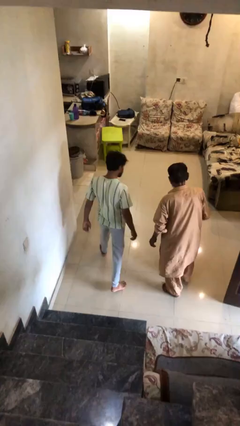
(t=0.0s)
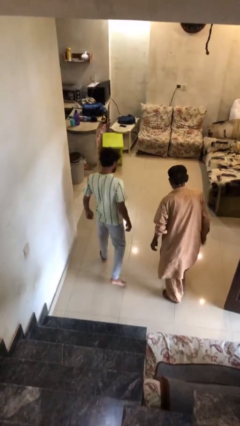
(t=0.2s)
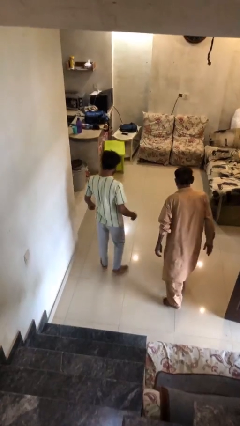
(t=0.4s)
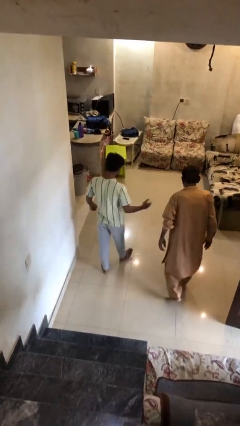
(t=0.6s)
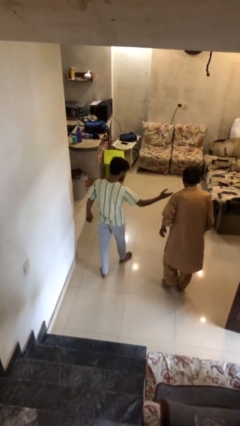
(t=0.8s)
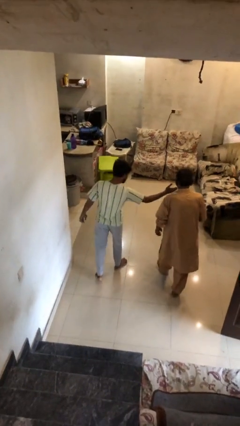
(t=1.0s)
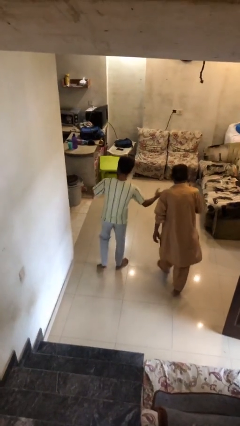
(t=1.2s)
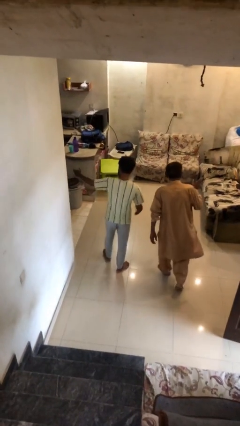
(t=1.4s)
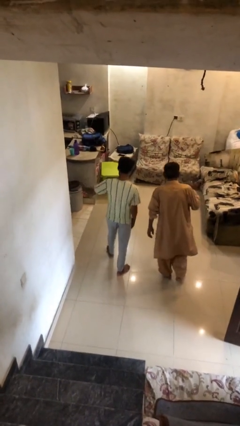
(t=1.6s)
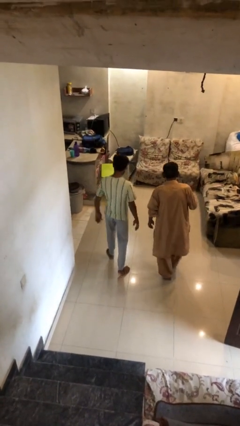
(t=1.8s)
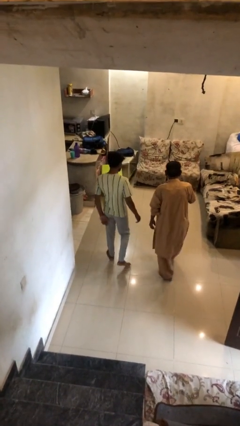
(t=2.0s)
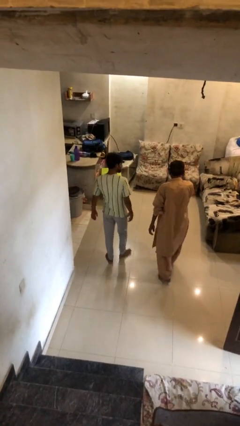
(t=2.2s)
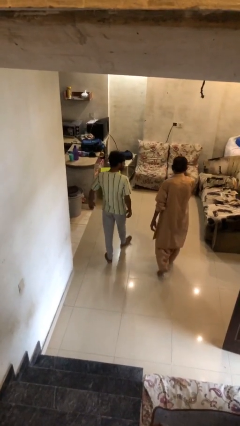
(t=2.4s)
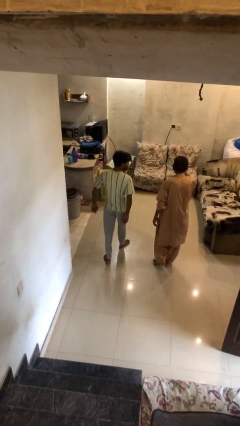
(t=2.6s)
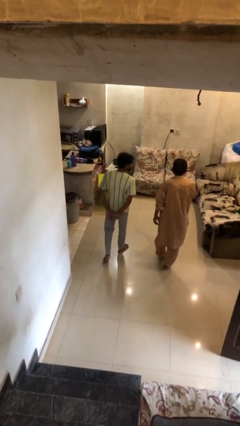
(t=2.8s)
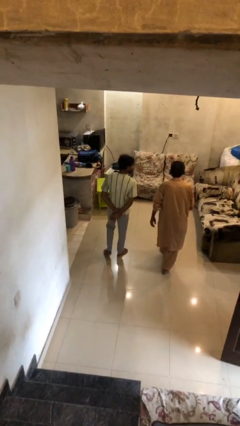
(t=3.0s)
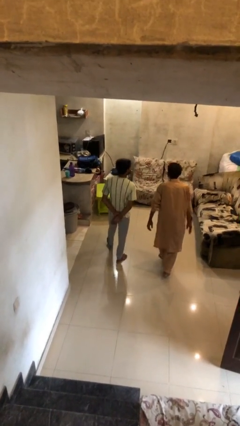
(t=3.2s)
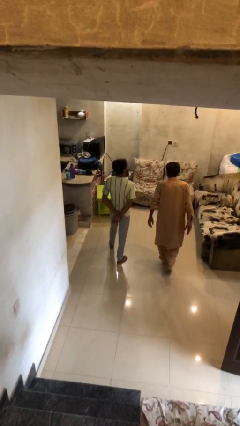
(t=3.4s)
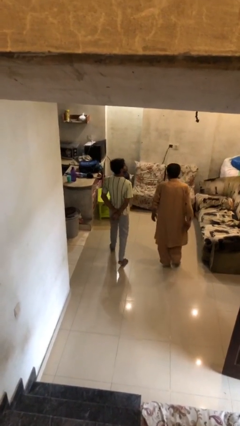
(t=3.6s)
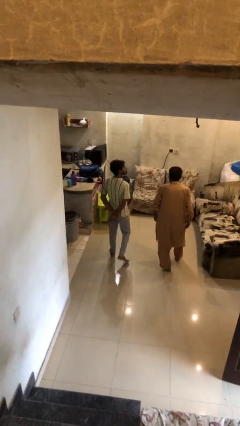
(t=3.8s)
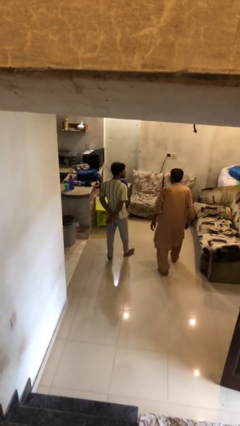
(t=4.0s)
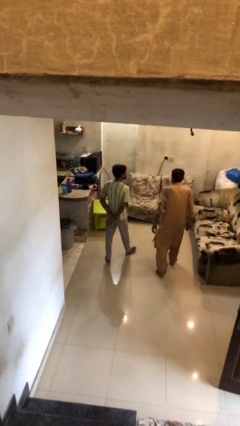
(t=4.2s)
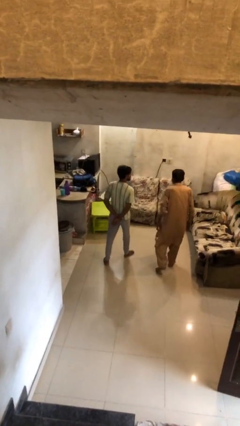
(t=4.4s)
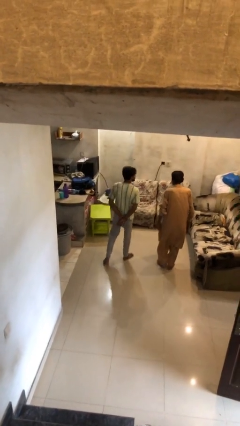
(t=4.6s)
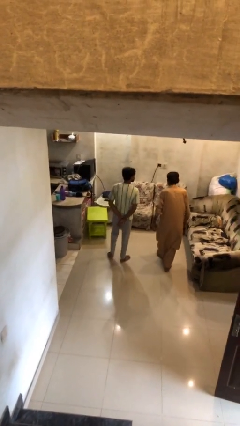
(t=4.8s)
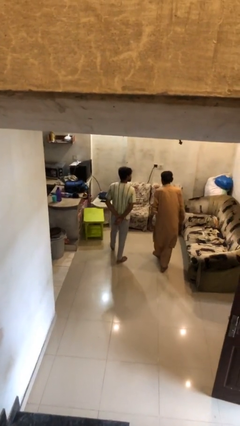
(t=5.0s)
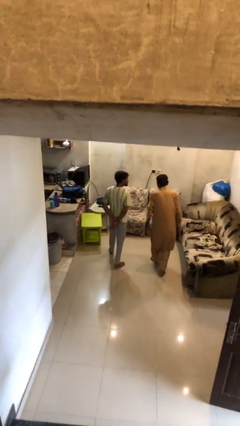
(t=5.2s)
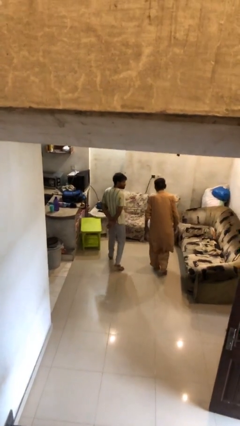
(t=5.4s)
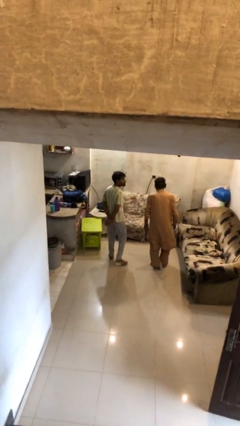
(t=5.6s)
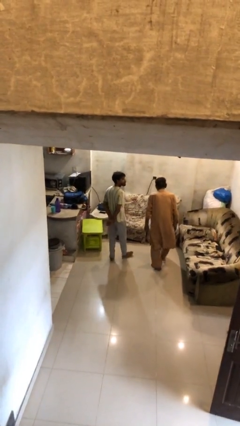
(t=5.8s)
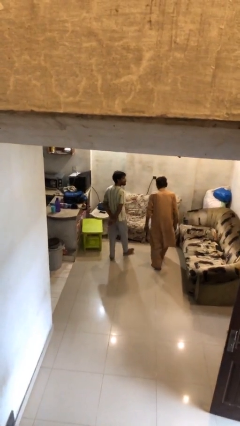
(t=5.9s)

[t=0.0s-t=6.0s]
person talks to person

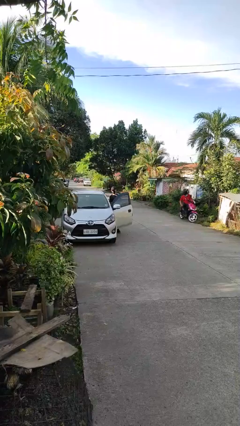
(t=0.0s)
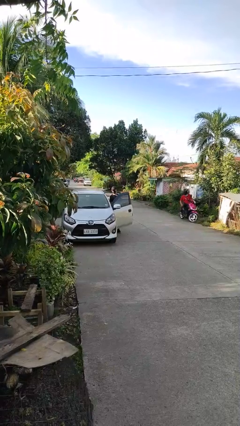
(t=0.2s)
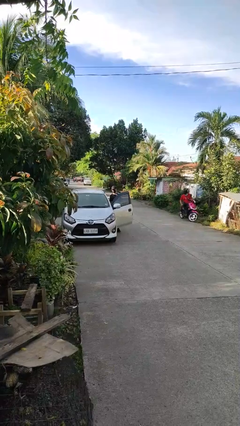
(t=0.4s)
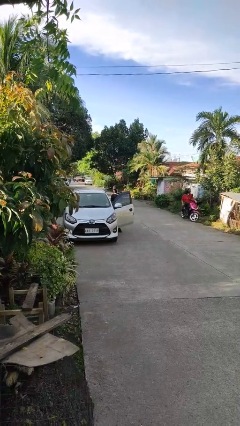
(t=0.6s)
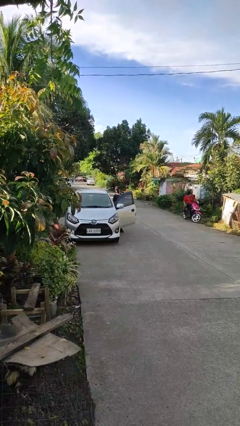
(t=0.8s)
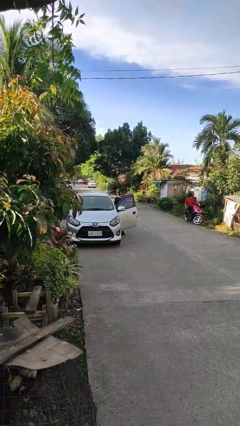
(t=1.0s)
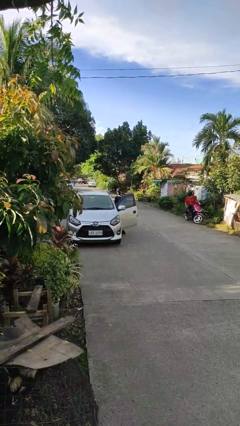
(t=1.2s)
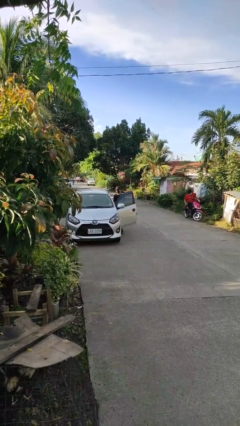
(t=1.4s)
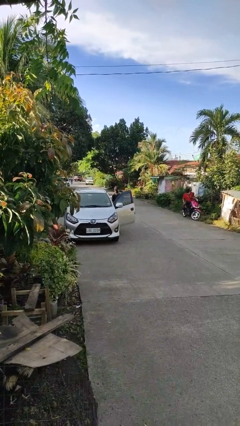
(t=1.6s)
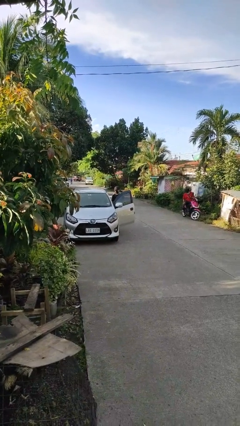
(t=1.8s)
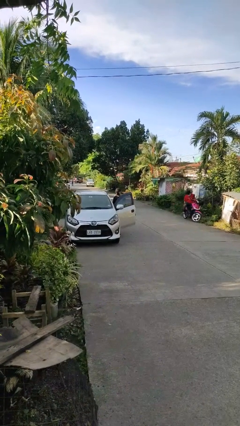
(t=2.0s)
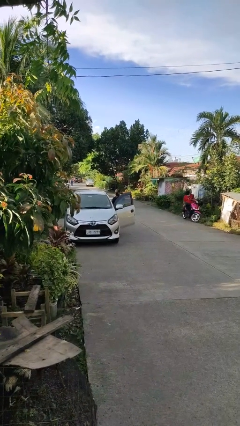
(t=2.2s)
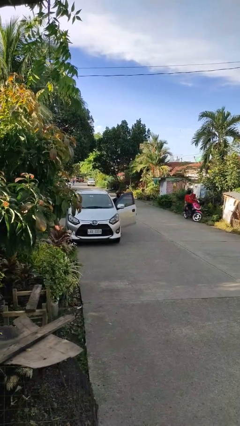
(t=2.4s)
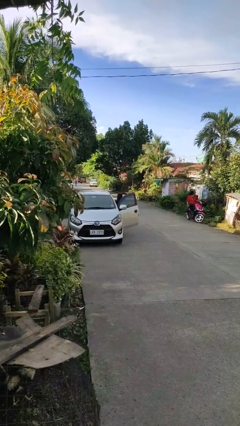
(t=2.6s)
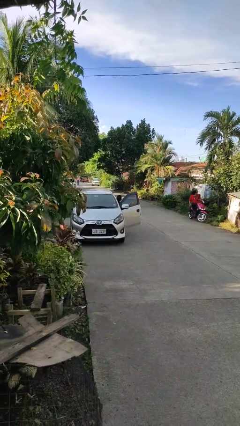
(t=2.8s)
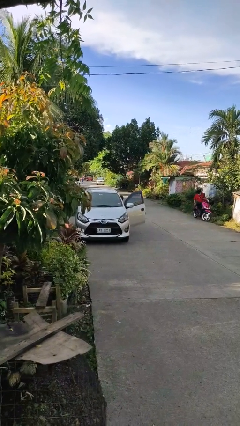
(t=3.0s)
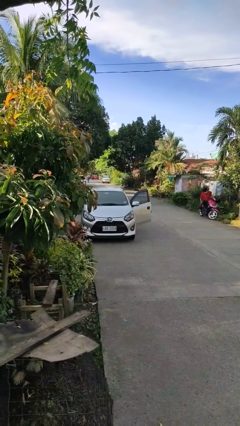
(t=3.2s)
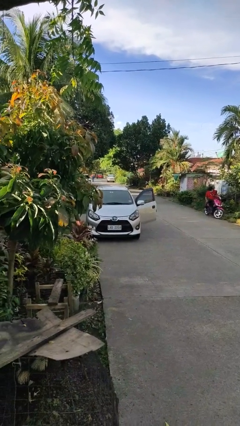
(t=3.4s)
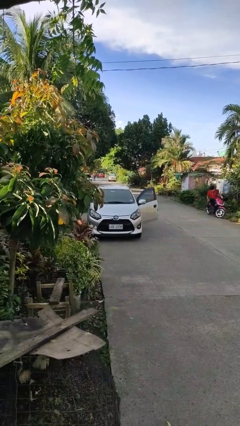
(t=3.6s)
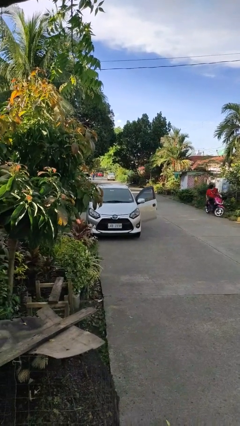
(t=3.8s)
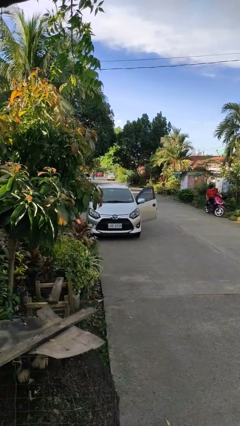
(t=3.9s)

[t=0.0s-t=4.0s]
person enters car

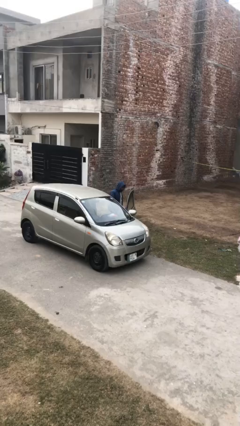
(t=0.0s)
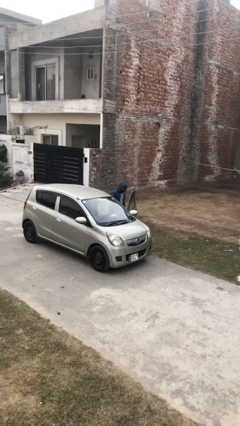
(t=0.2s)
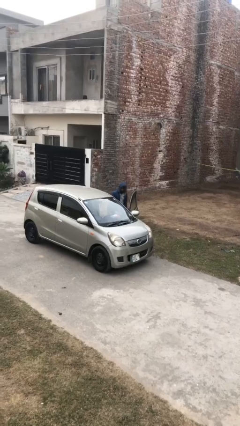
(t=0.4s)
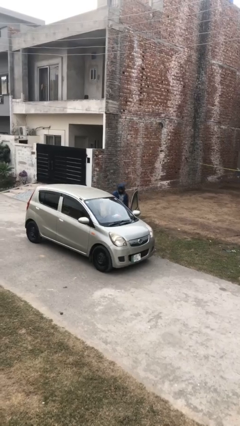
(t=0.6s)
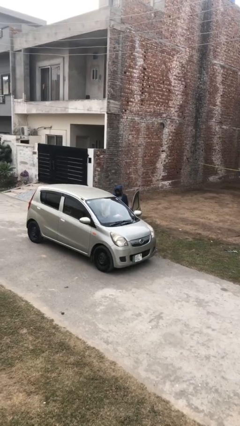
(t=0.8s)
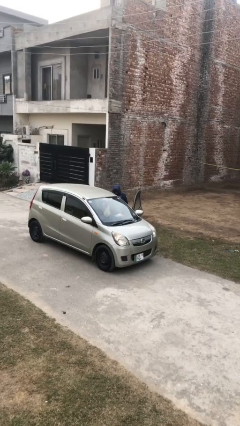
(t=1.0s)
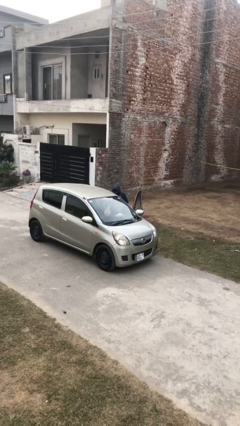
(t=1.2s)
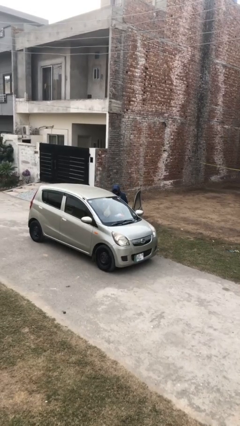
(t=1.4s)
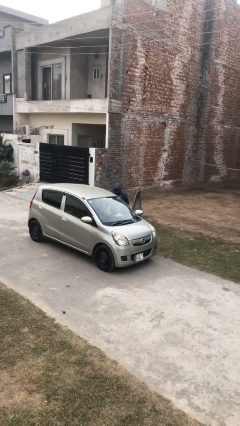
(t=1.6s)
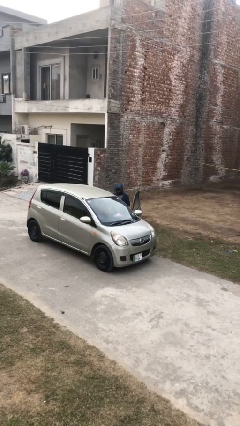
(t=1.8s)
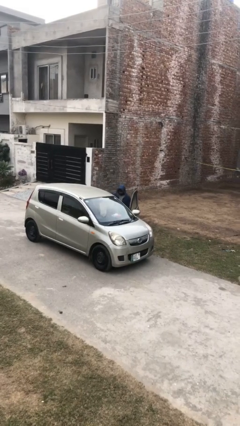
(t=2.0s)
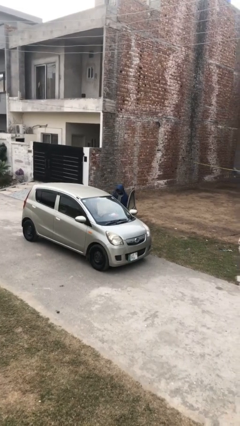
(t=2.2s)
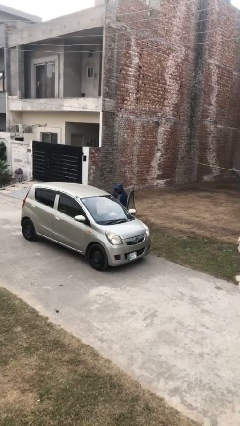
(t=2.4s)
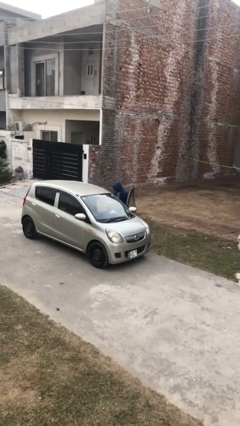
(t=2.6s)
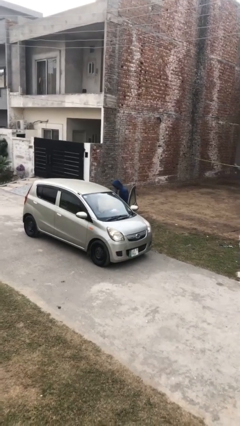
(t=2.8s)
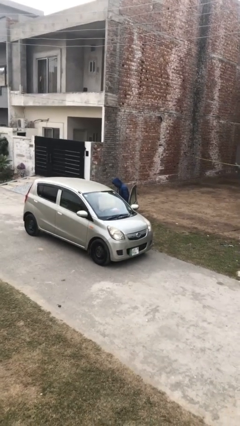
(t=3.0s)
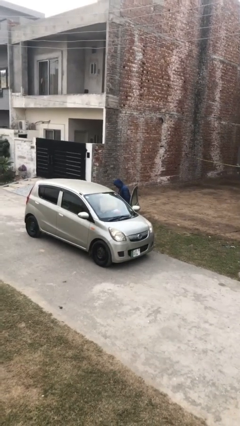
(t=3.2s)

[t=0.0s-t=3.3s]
person unloads car

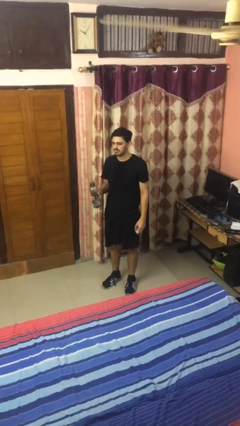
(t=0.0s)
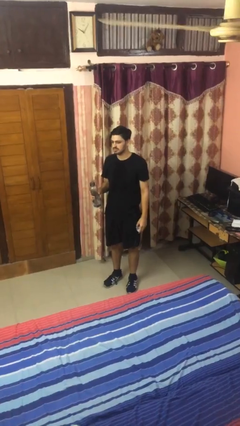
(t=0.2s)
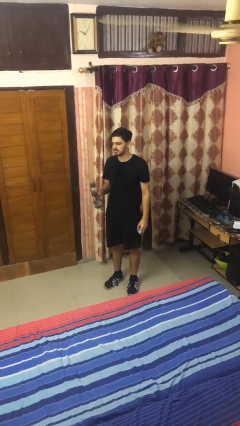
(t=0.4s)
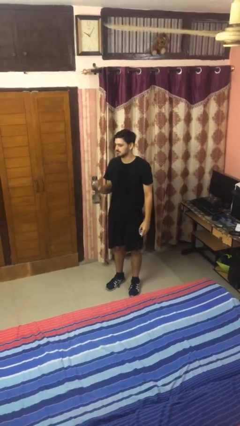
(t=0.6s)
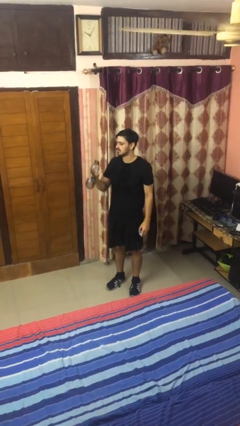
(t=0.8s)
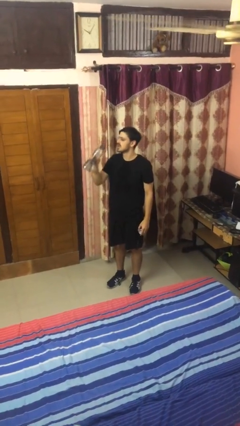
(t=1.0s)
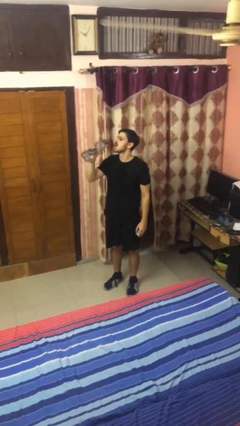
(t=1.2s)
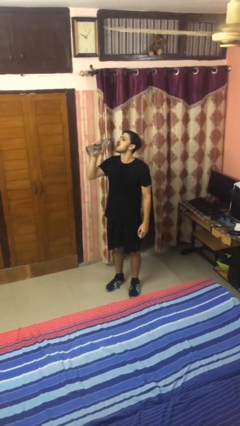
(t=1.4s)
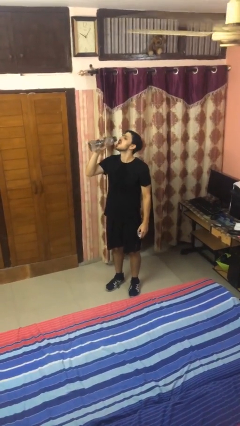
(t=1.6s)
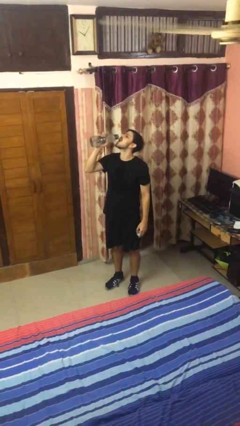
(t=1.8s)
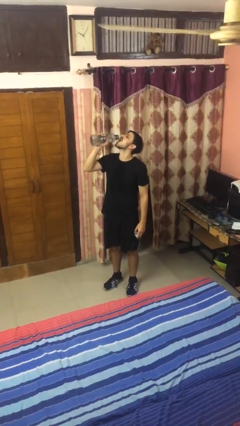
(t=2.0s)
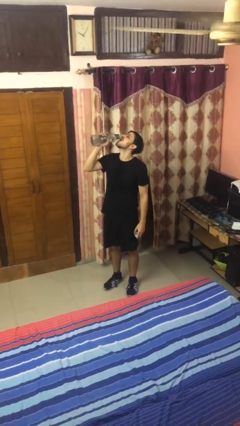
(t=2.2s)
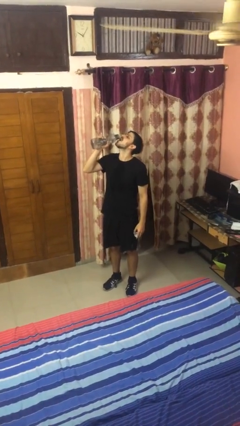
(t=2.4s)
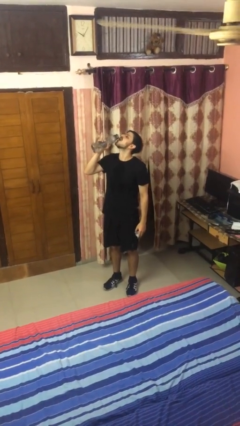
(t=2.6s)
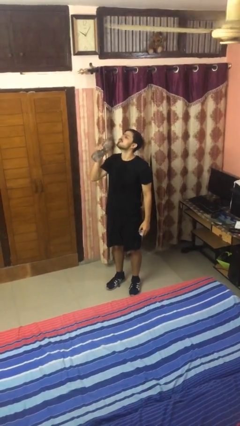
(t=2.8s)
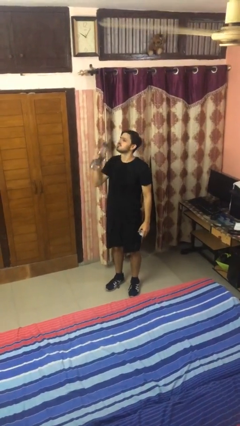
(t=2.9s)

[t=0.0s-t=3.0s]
person drinks from bottle

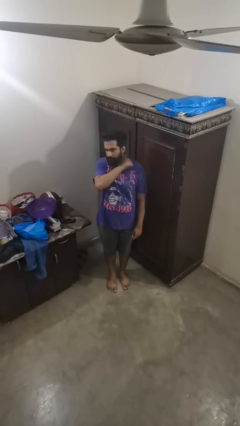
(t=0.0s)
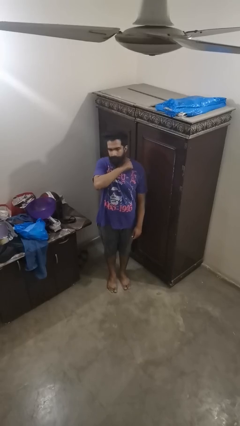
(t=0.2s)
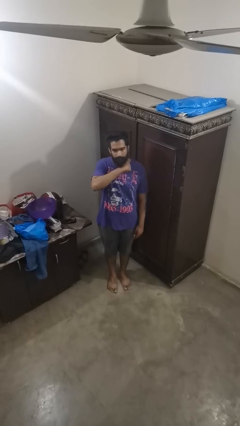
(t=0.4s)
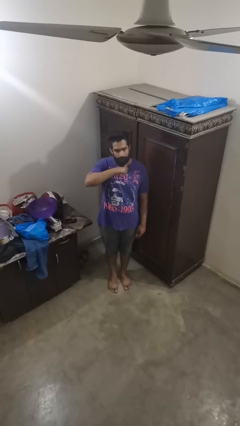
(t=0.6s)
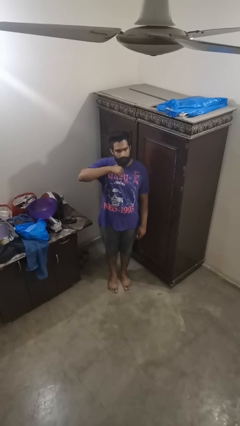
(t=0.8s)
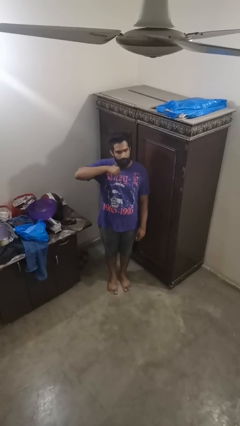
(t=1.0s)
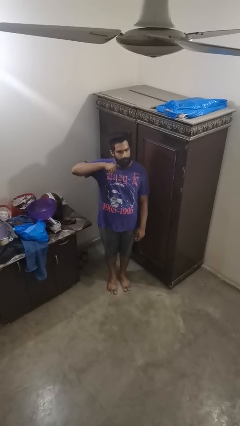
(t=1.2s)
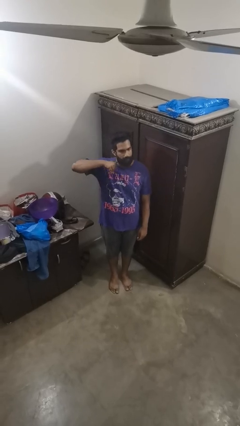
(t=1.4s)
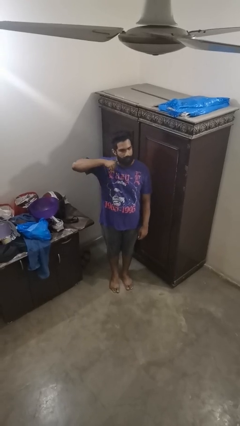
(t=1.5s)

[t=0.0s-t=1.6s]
person gestures cut
